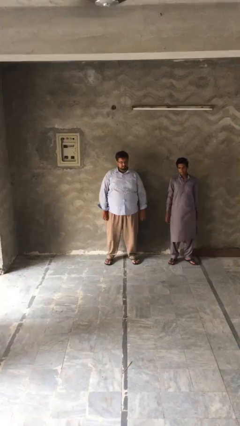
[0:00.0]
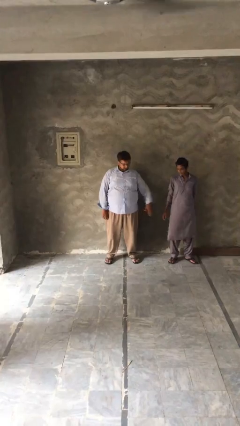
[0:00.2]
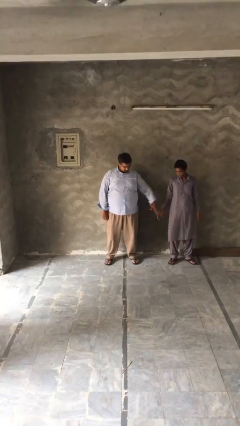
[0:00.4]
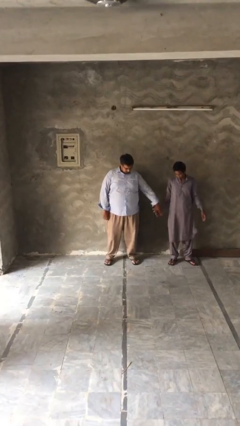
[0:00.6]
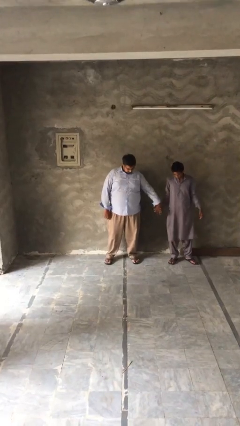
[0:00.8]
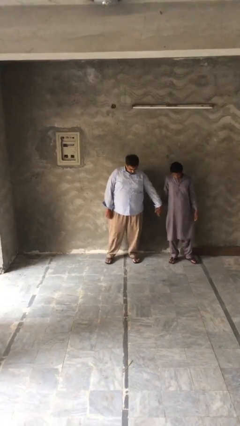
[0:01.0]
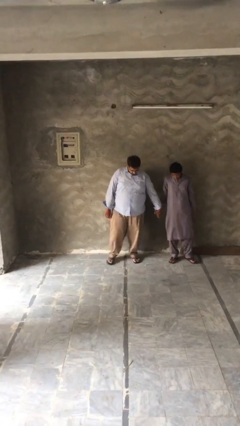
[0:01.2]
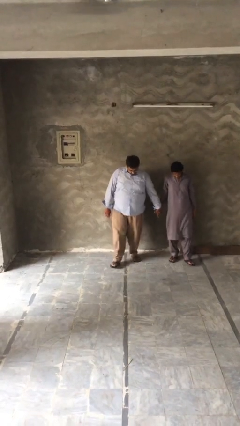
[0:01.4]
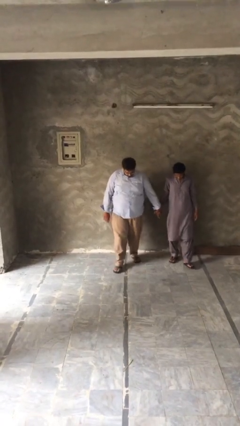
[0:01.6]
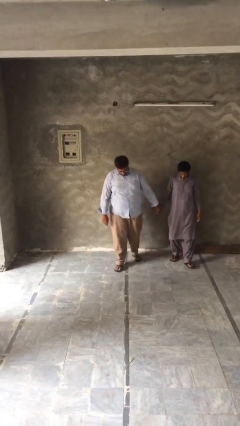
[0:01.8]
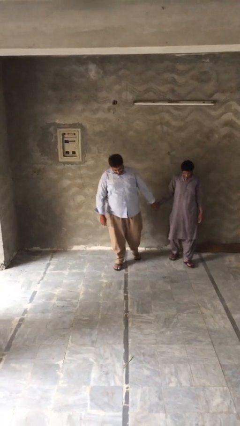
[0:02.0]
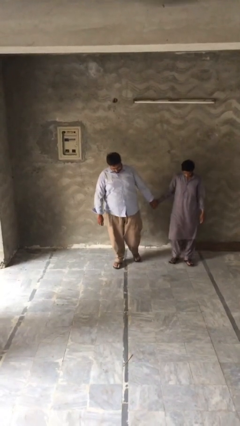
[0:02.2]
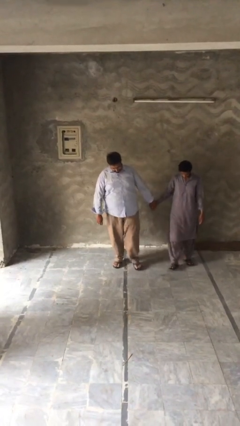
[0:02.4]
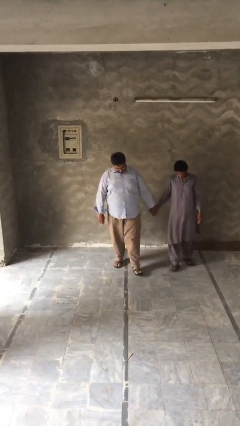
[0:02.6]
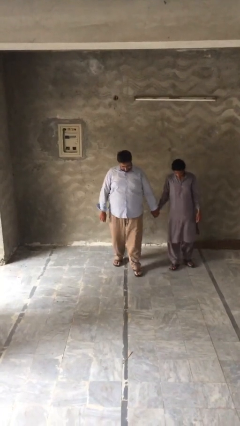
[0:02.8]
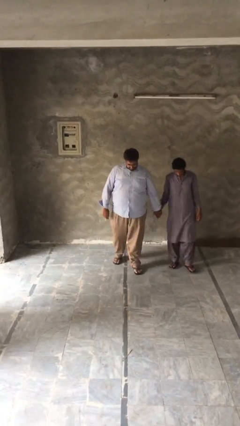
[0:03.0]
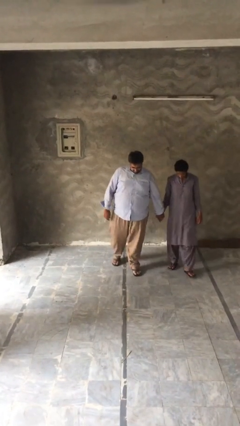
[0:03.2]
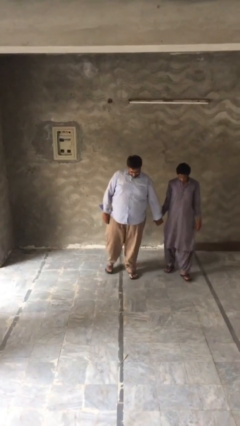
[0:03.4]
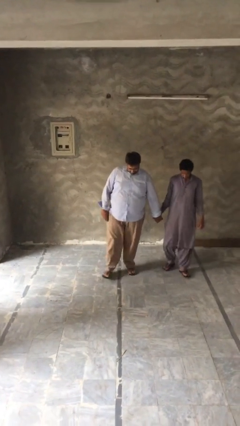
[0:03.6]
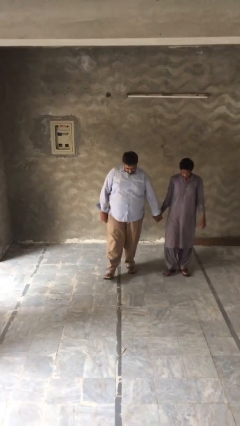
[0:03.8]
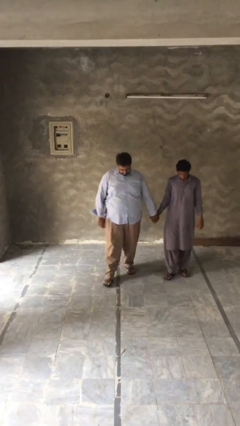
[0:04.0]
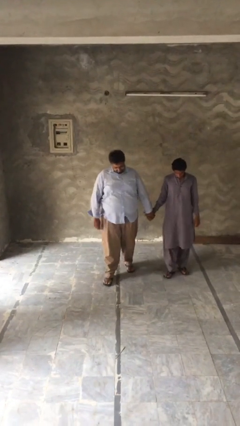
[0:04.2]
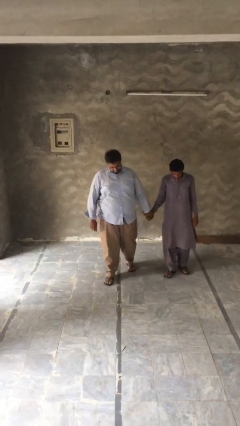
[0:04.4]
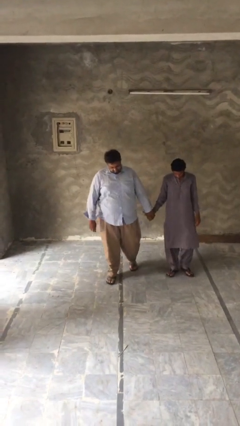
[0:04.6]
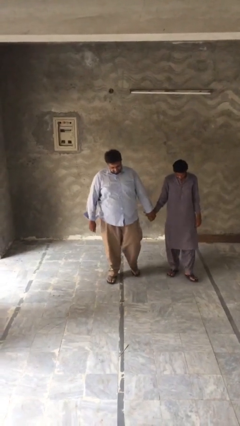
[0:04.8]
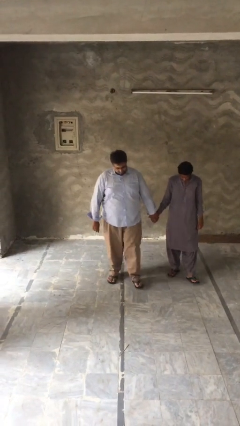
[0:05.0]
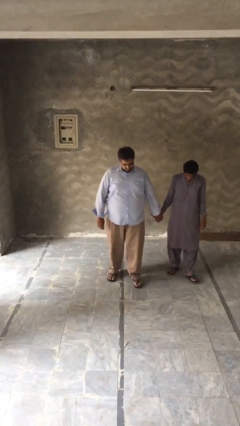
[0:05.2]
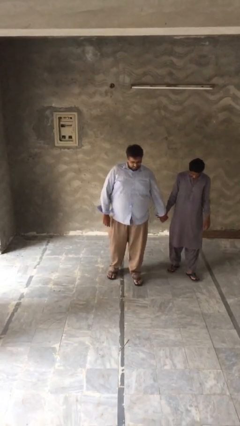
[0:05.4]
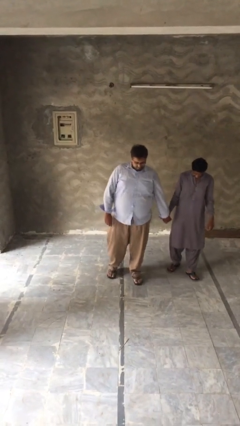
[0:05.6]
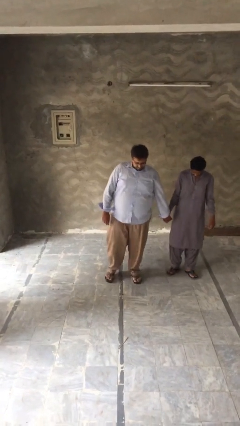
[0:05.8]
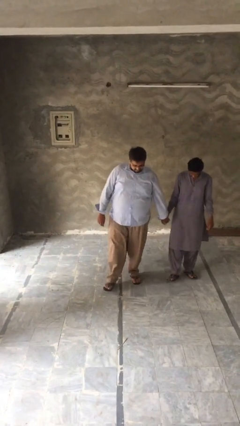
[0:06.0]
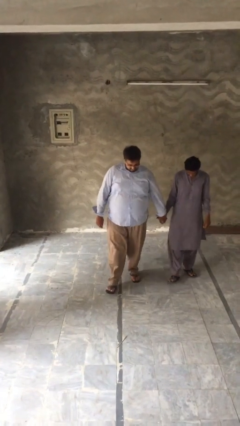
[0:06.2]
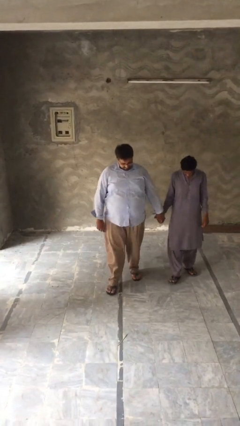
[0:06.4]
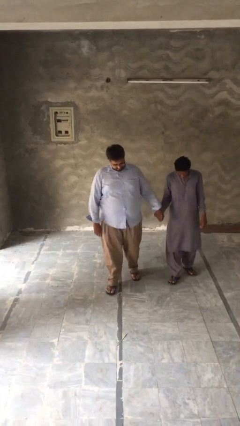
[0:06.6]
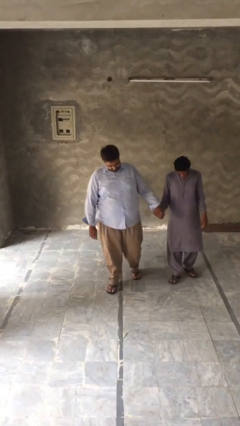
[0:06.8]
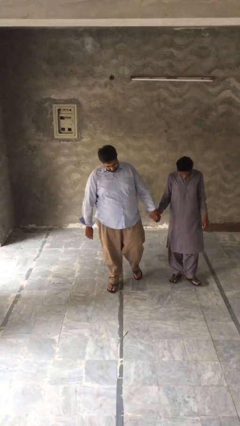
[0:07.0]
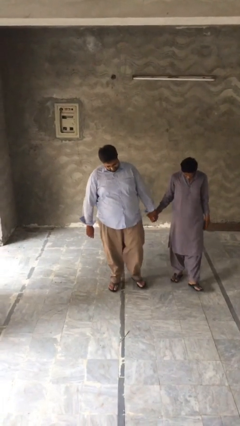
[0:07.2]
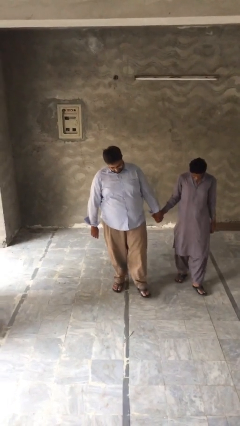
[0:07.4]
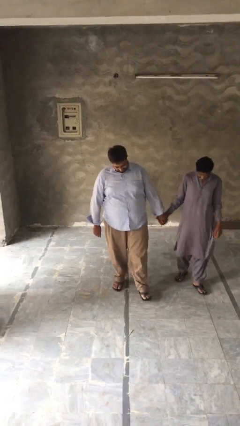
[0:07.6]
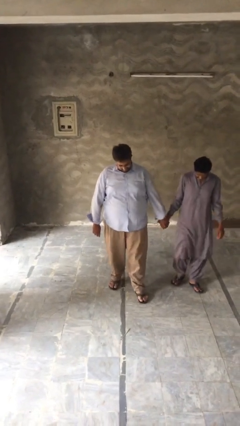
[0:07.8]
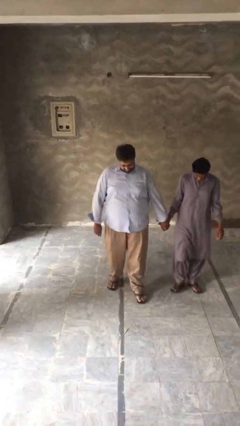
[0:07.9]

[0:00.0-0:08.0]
person holds hand

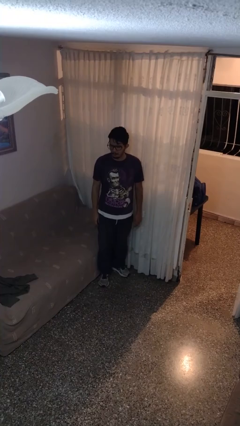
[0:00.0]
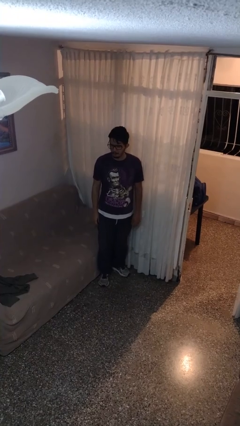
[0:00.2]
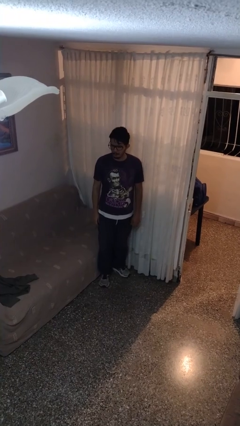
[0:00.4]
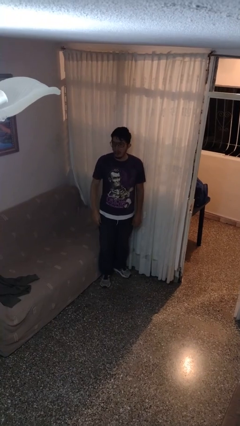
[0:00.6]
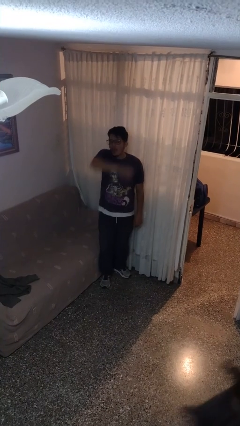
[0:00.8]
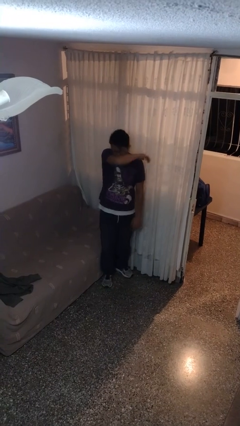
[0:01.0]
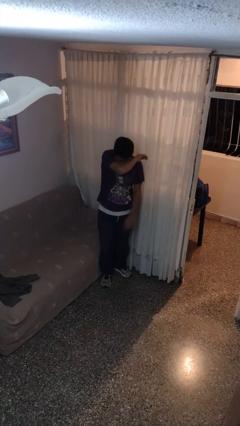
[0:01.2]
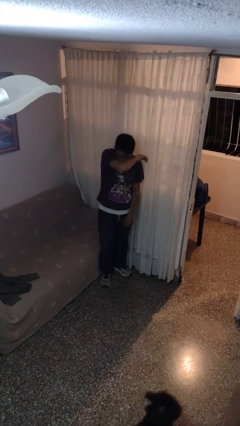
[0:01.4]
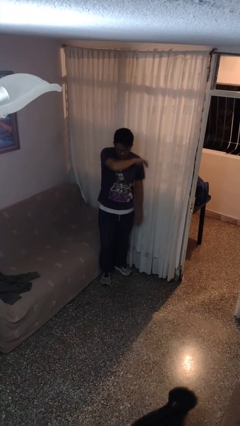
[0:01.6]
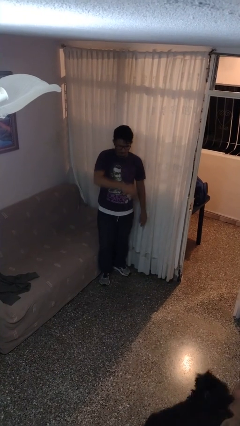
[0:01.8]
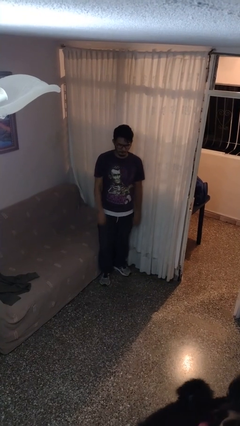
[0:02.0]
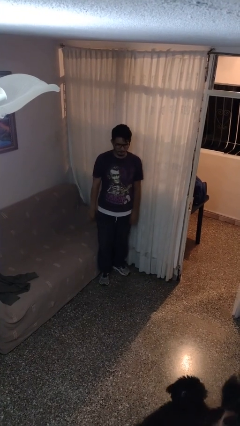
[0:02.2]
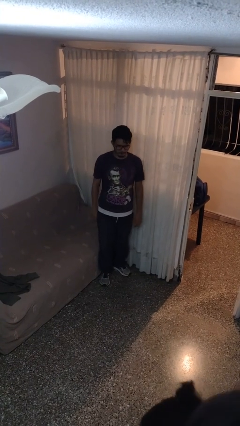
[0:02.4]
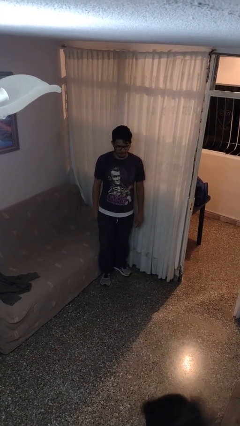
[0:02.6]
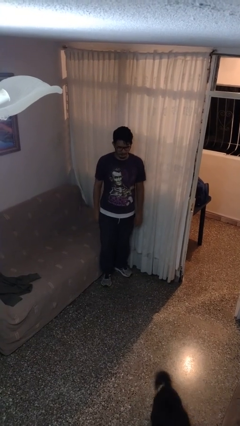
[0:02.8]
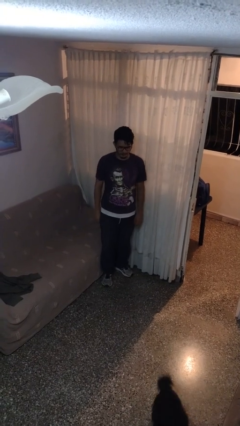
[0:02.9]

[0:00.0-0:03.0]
person sneezes into arm

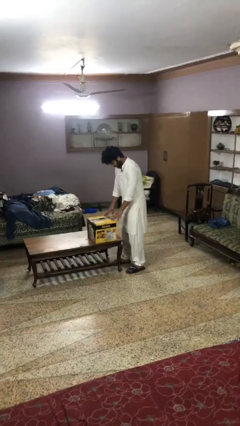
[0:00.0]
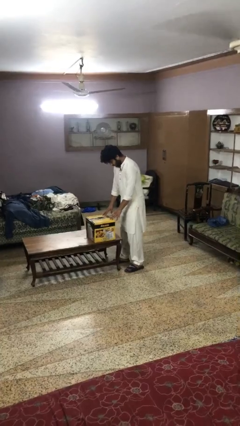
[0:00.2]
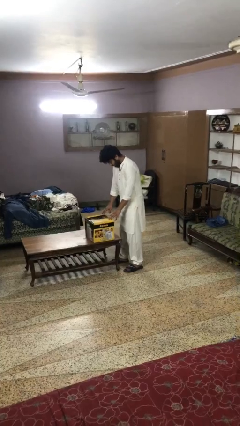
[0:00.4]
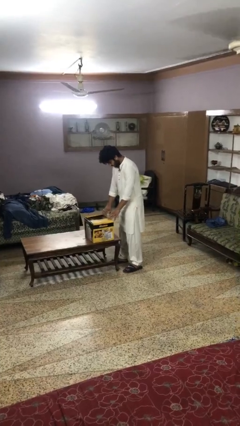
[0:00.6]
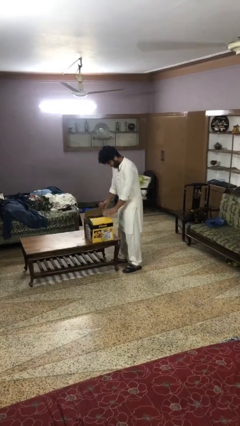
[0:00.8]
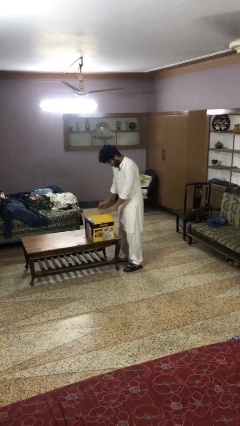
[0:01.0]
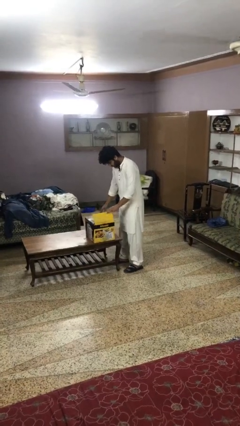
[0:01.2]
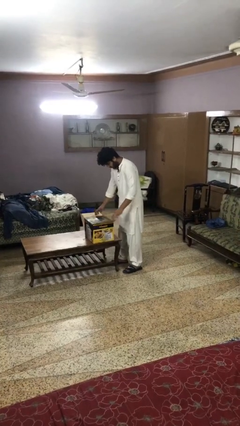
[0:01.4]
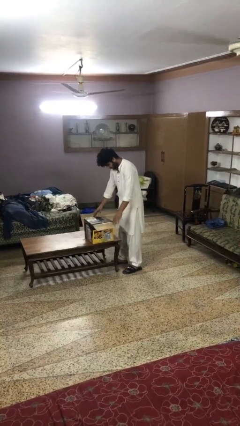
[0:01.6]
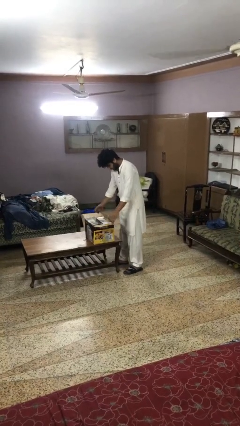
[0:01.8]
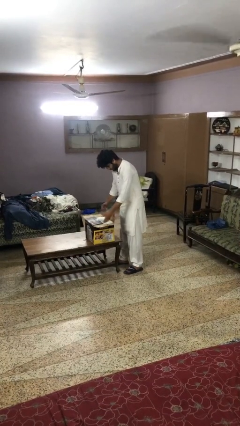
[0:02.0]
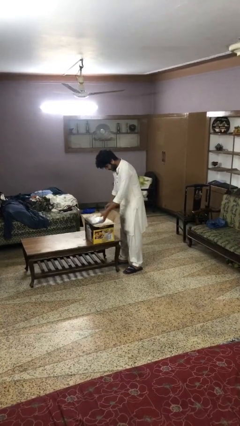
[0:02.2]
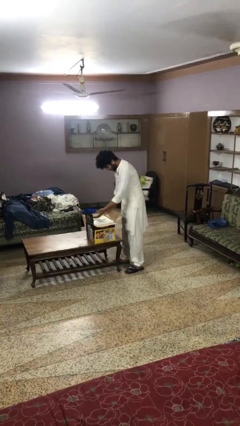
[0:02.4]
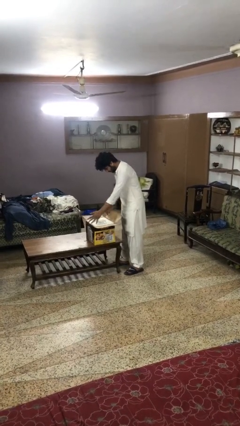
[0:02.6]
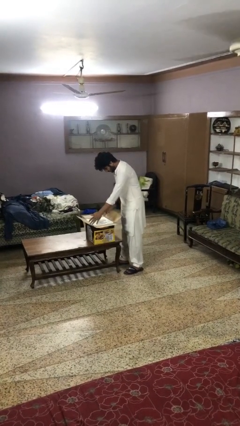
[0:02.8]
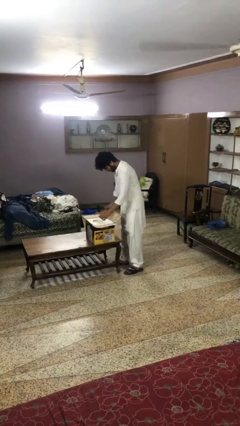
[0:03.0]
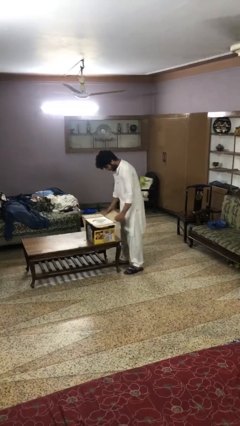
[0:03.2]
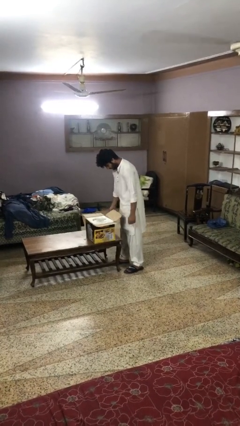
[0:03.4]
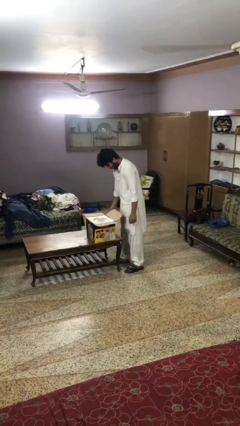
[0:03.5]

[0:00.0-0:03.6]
person opens box

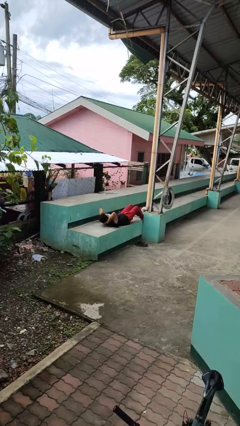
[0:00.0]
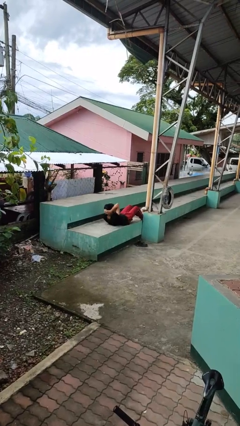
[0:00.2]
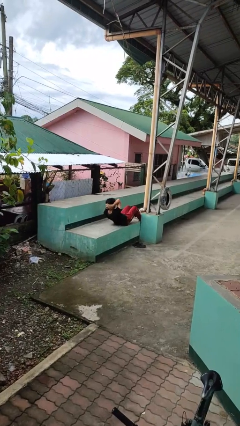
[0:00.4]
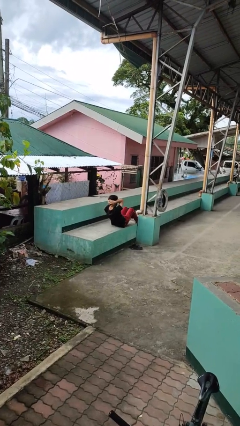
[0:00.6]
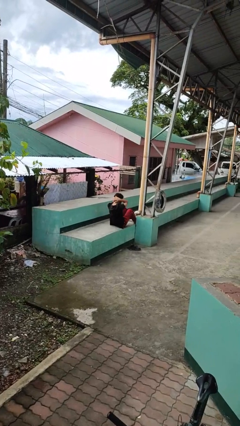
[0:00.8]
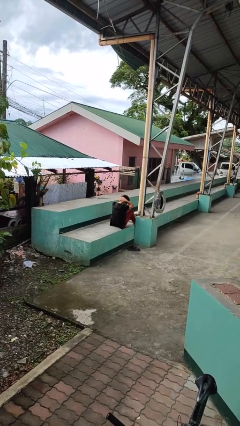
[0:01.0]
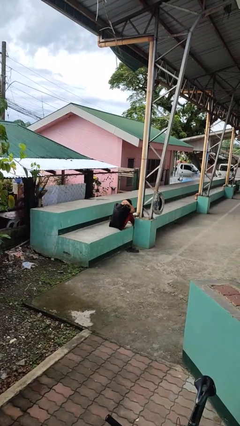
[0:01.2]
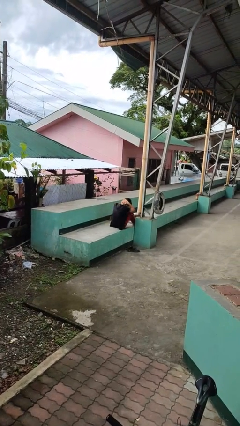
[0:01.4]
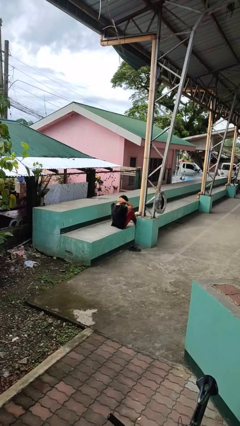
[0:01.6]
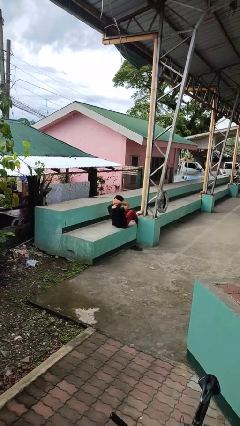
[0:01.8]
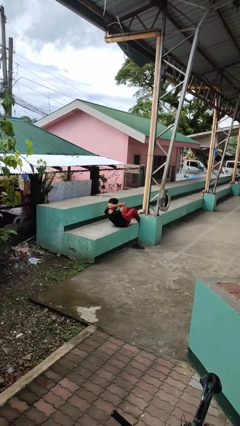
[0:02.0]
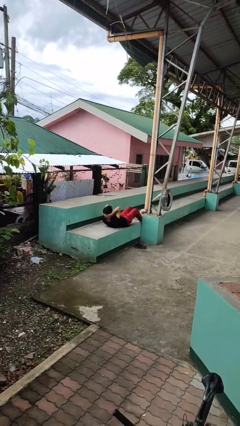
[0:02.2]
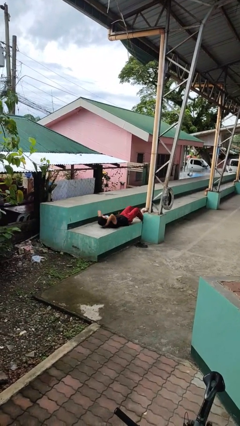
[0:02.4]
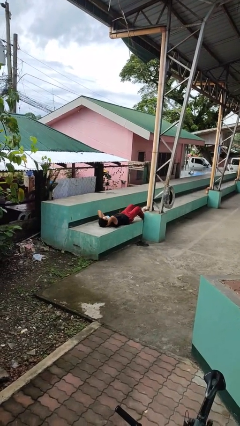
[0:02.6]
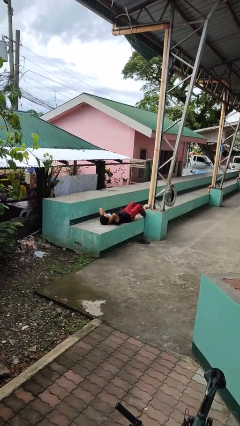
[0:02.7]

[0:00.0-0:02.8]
person exercises with situp
